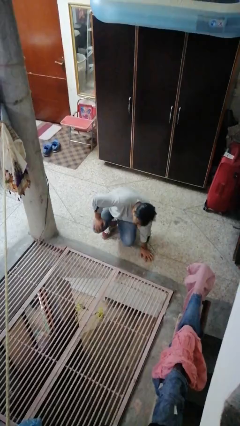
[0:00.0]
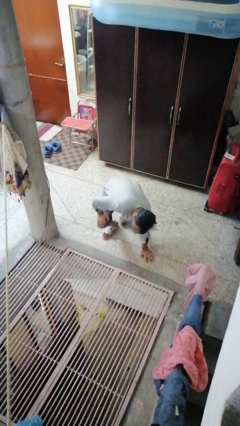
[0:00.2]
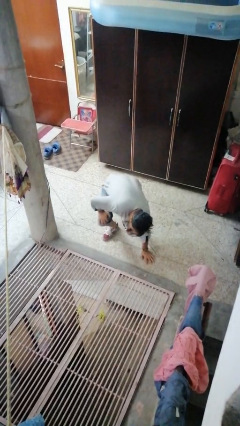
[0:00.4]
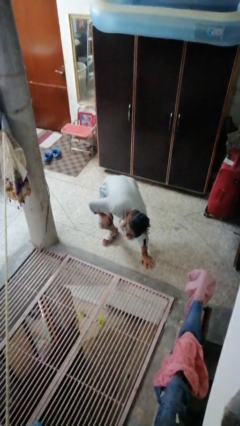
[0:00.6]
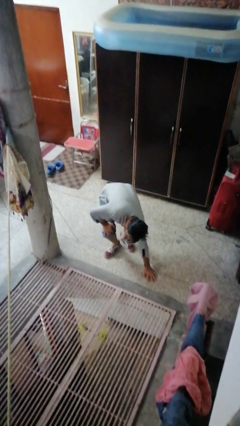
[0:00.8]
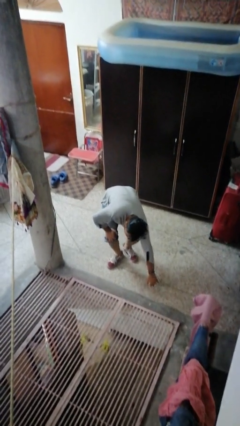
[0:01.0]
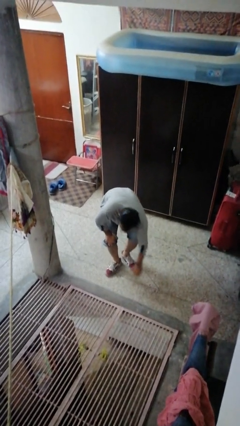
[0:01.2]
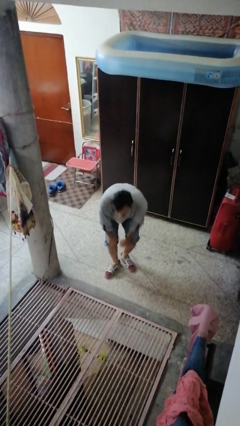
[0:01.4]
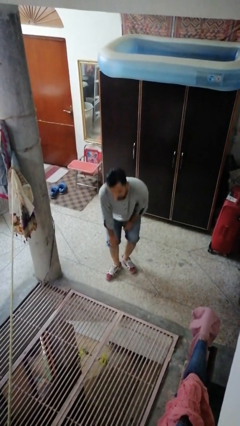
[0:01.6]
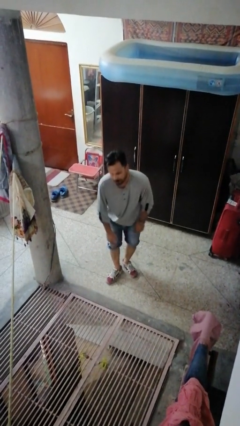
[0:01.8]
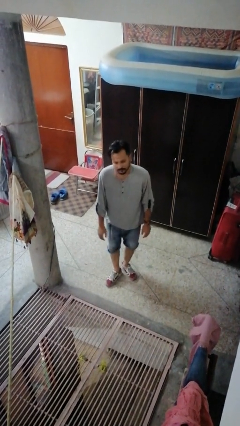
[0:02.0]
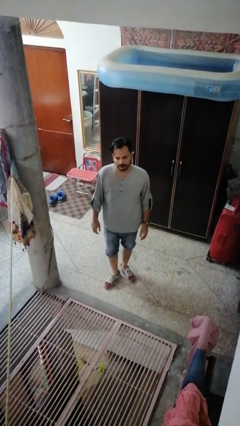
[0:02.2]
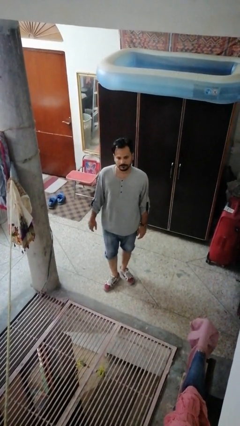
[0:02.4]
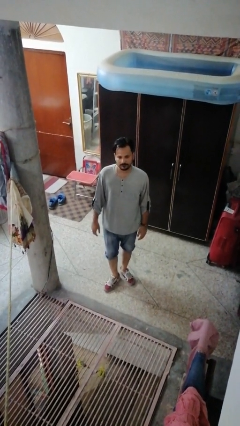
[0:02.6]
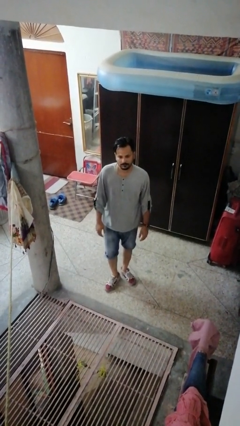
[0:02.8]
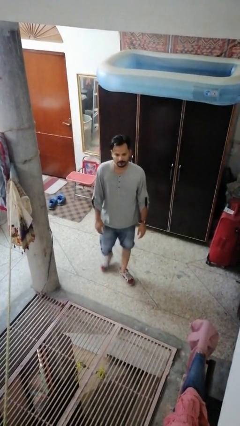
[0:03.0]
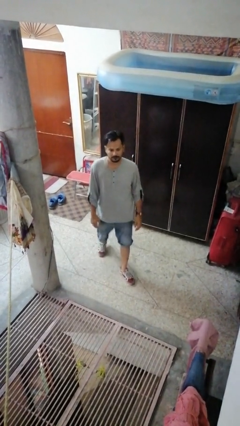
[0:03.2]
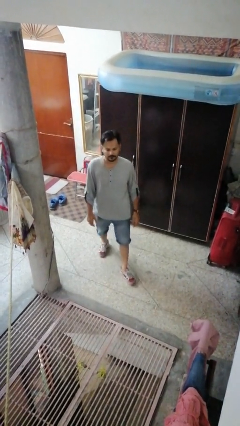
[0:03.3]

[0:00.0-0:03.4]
person stands up from floor

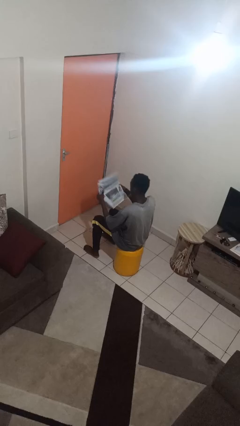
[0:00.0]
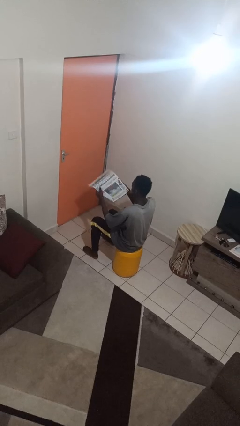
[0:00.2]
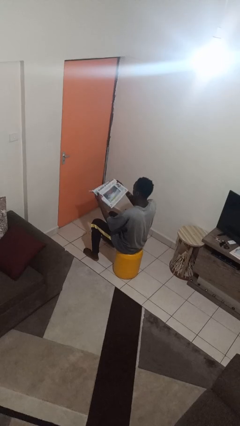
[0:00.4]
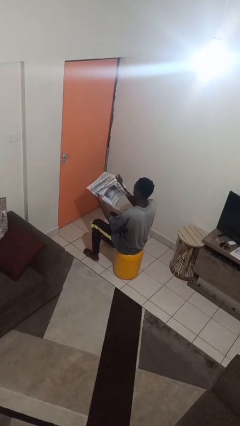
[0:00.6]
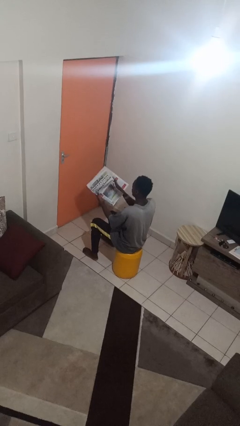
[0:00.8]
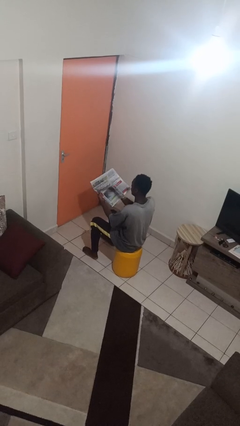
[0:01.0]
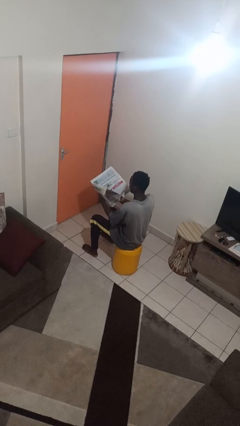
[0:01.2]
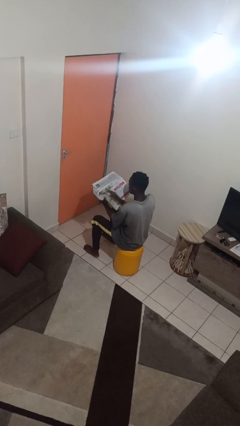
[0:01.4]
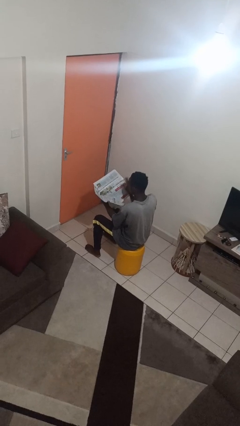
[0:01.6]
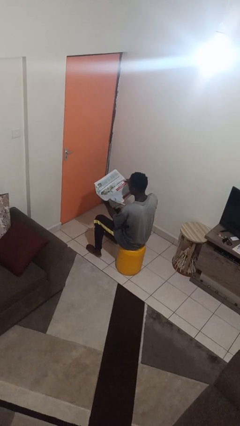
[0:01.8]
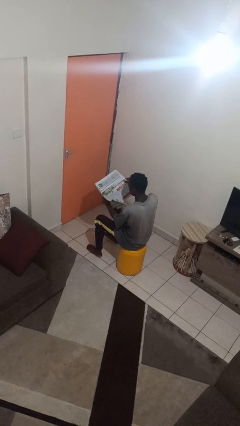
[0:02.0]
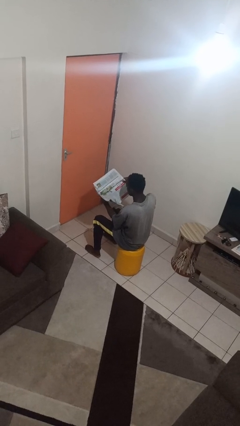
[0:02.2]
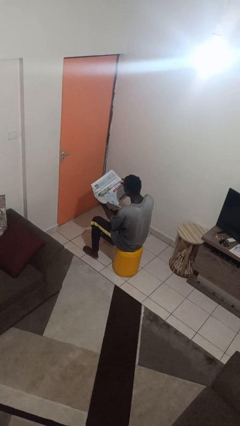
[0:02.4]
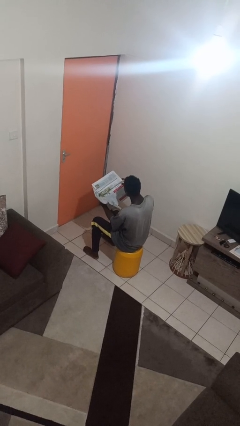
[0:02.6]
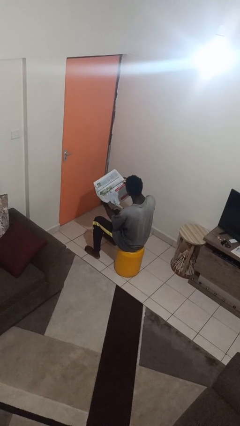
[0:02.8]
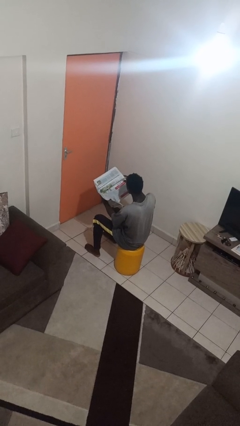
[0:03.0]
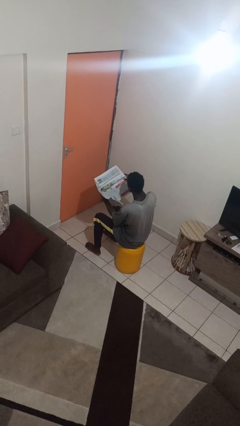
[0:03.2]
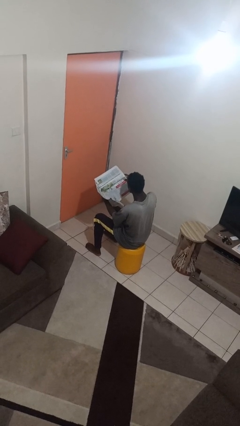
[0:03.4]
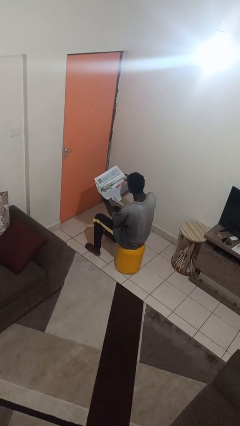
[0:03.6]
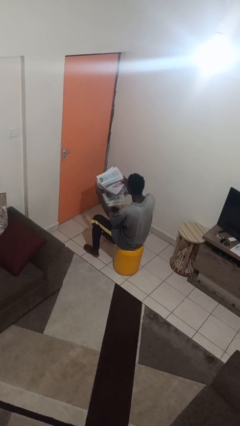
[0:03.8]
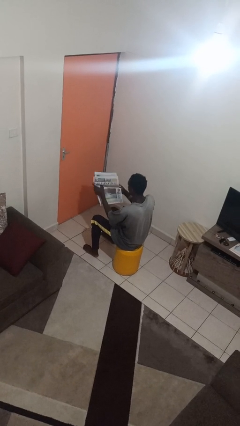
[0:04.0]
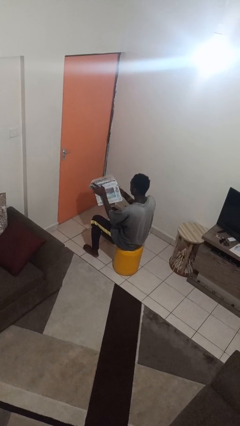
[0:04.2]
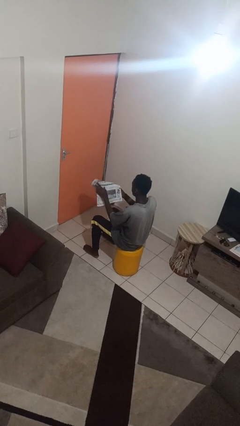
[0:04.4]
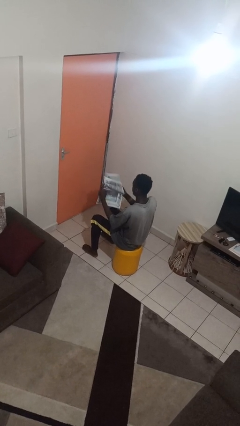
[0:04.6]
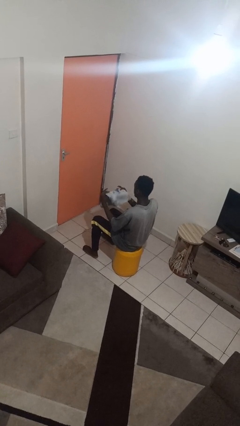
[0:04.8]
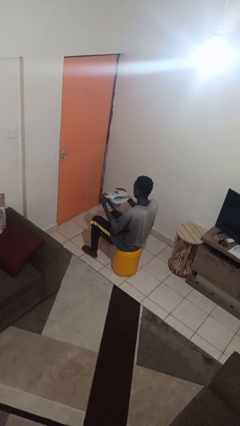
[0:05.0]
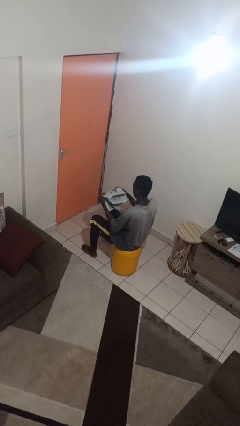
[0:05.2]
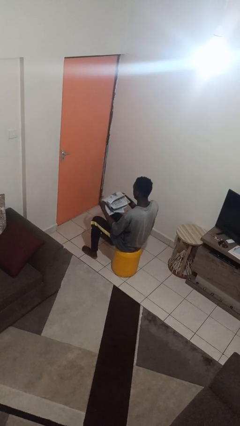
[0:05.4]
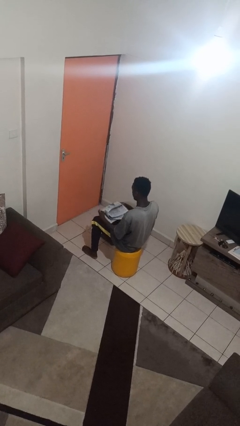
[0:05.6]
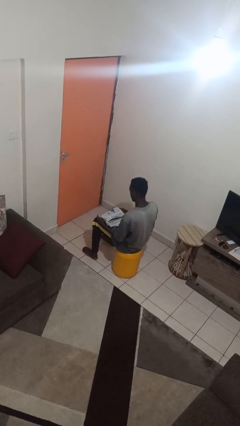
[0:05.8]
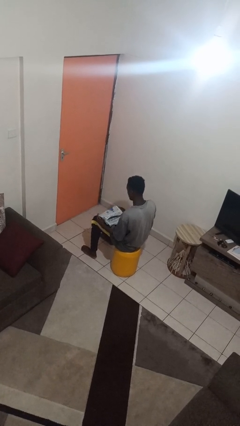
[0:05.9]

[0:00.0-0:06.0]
person reads newspaper

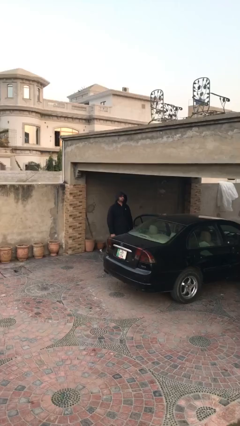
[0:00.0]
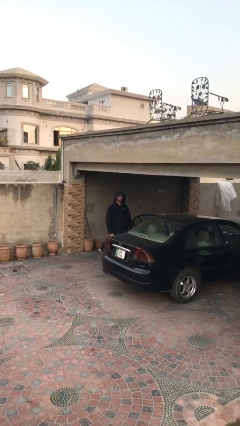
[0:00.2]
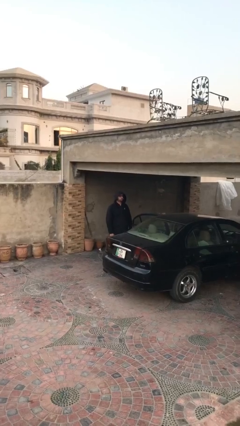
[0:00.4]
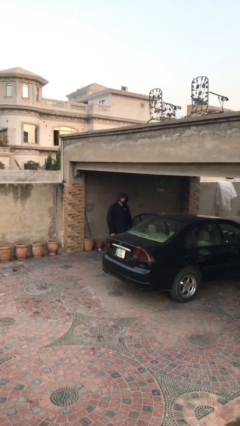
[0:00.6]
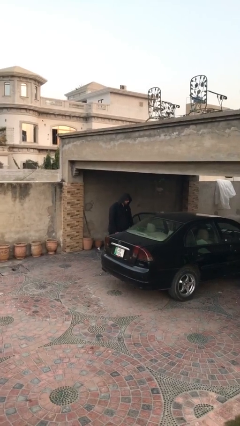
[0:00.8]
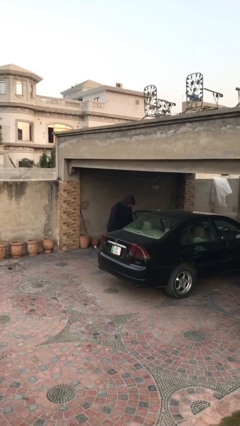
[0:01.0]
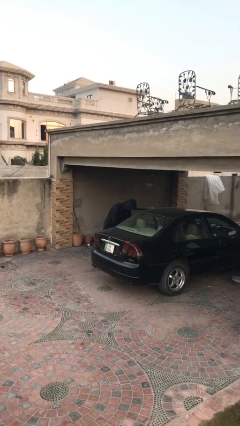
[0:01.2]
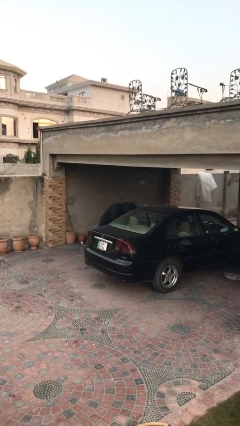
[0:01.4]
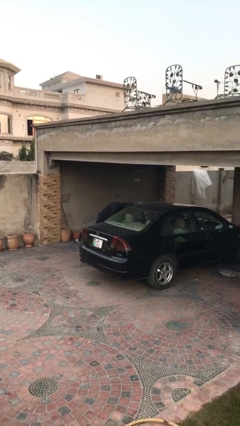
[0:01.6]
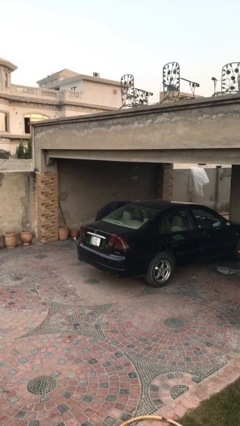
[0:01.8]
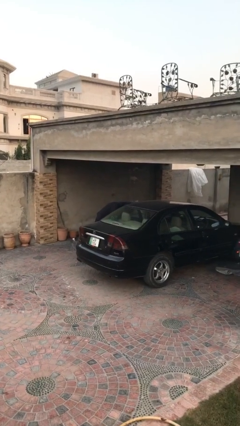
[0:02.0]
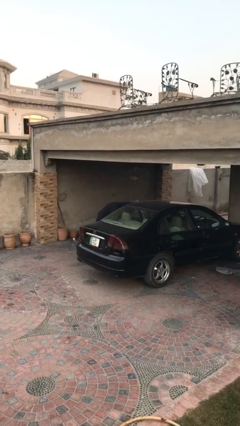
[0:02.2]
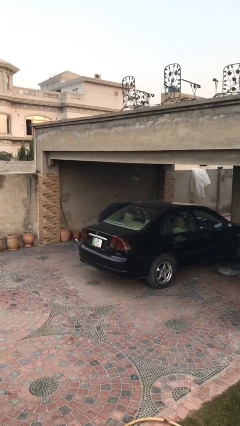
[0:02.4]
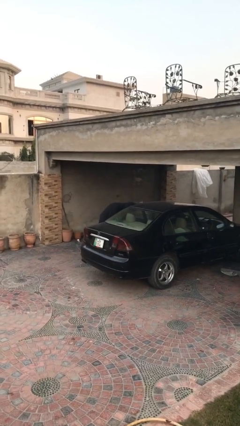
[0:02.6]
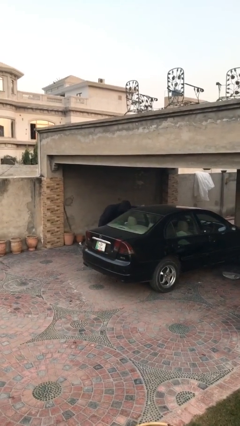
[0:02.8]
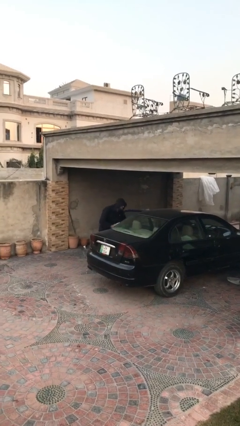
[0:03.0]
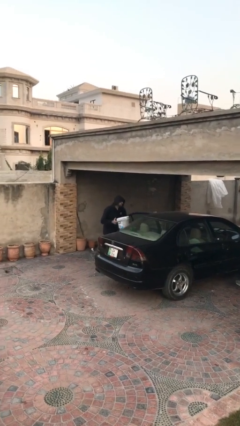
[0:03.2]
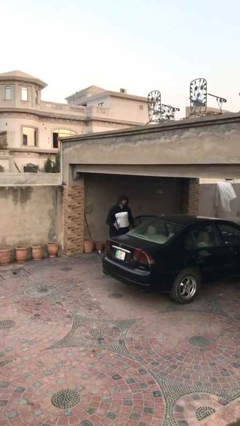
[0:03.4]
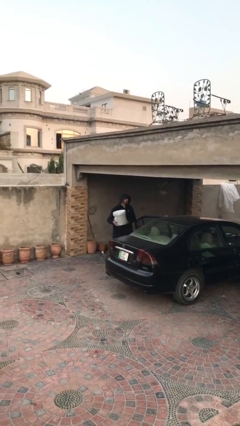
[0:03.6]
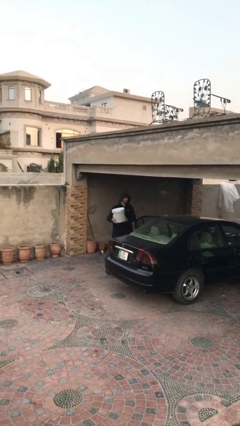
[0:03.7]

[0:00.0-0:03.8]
person unloads car

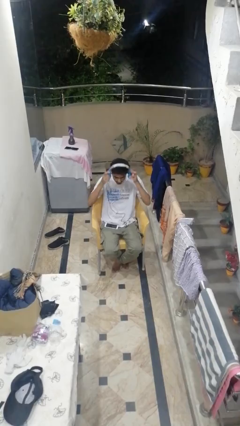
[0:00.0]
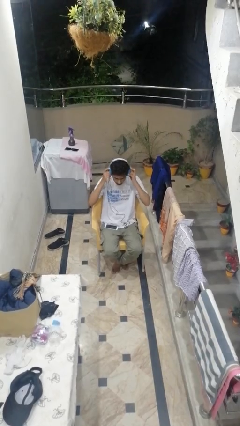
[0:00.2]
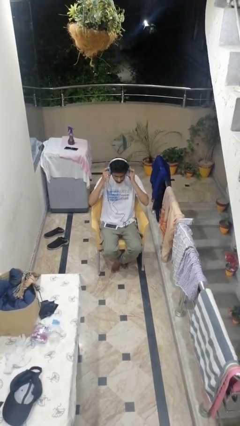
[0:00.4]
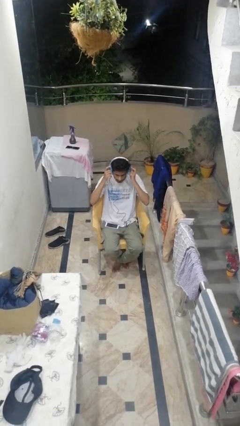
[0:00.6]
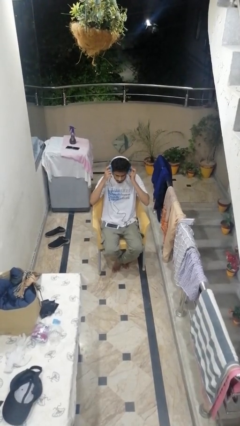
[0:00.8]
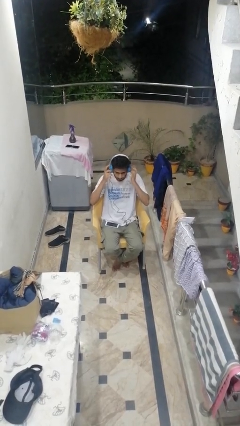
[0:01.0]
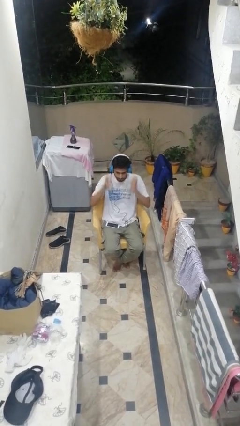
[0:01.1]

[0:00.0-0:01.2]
person puts on headphones

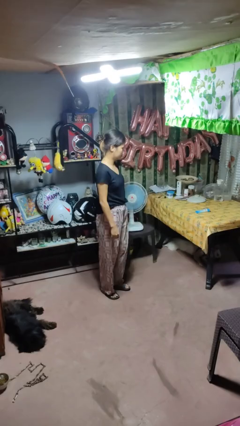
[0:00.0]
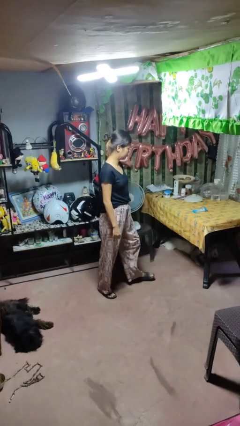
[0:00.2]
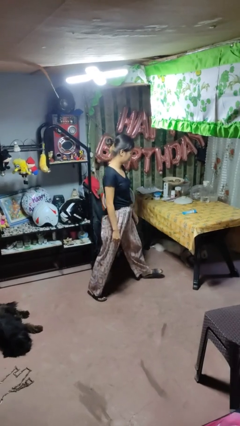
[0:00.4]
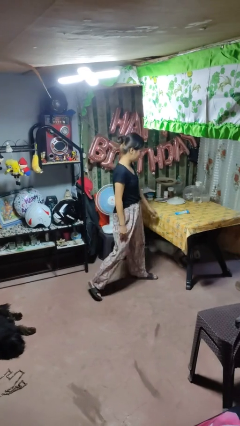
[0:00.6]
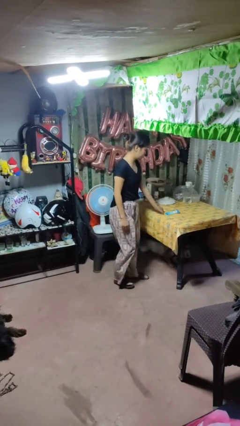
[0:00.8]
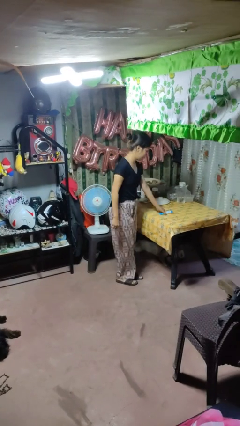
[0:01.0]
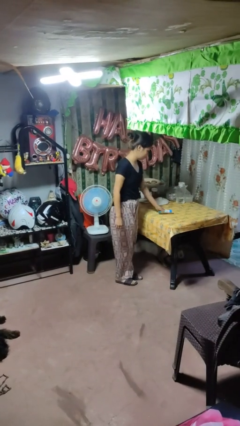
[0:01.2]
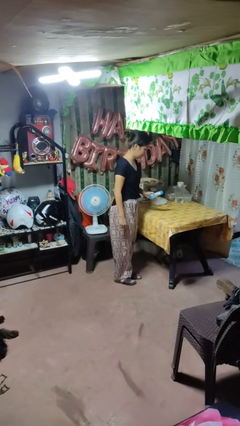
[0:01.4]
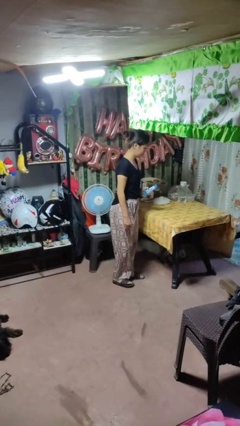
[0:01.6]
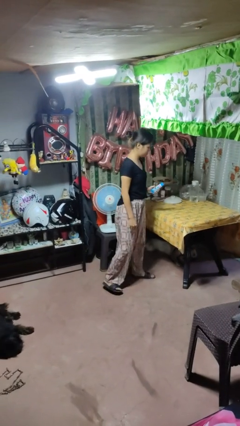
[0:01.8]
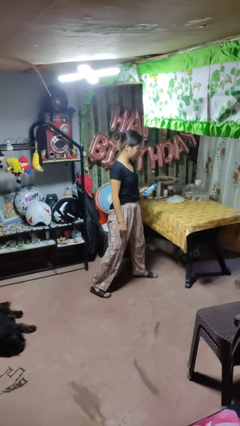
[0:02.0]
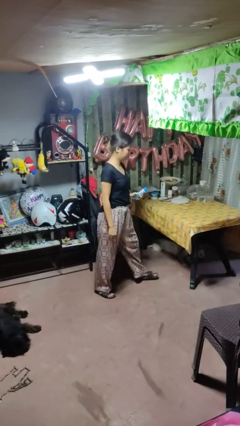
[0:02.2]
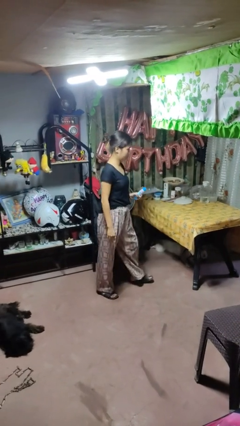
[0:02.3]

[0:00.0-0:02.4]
person picks up object from table

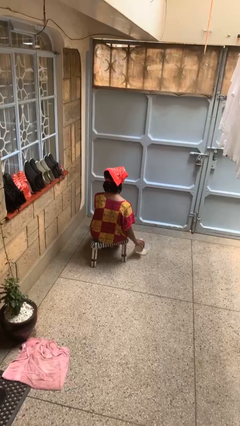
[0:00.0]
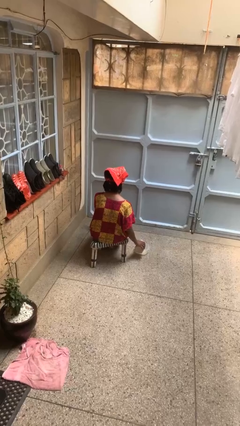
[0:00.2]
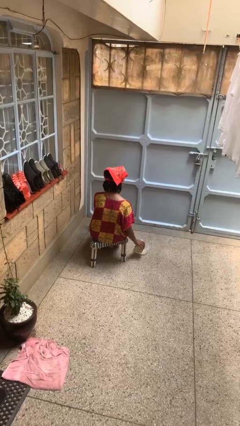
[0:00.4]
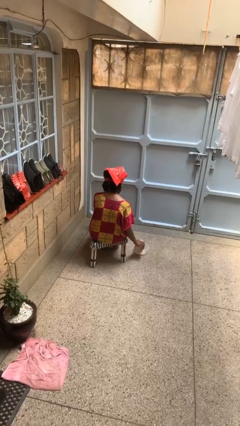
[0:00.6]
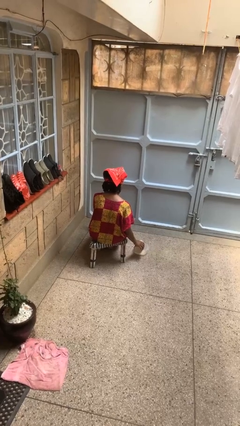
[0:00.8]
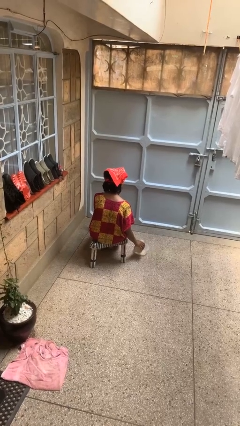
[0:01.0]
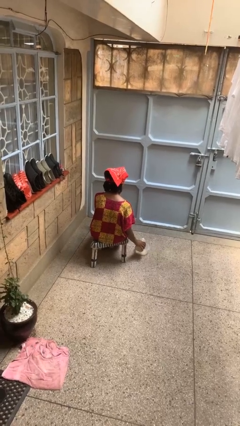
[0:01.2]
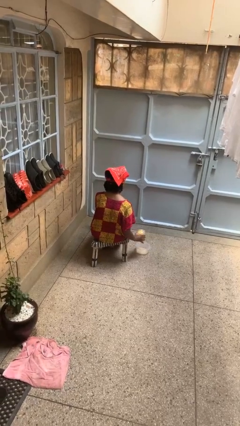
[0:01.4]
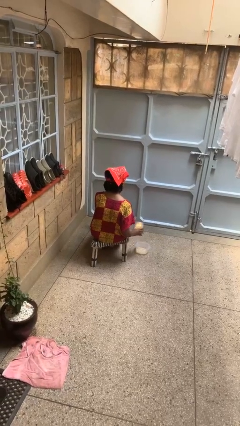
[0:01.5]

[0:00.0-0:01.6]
person pours into bowl
